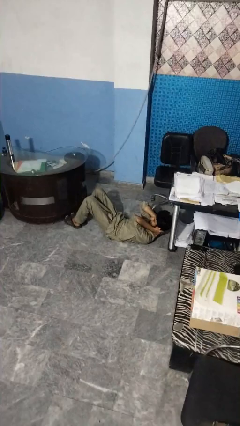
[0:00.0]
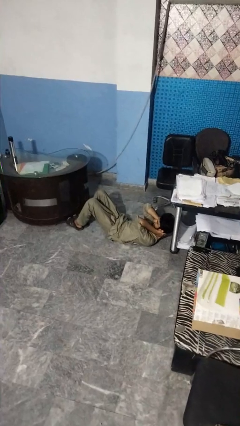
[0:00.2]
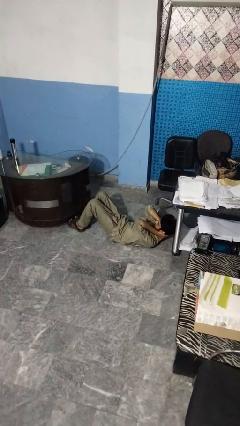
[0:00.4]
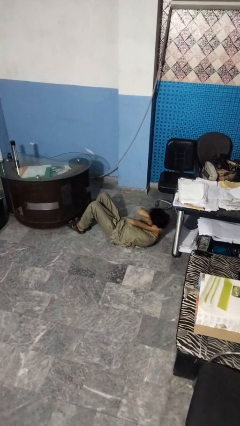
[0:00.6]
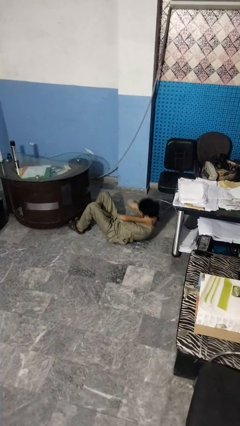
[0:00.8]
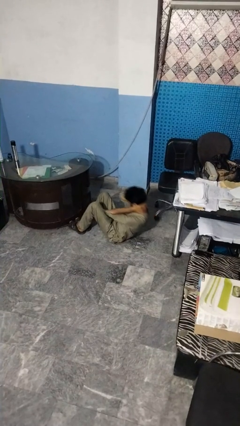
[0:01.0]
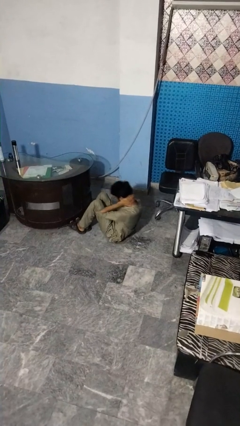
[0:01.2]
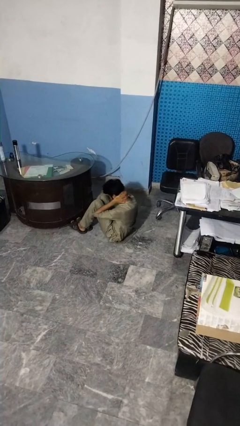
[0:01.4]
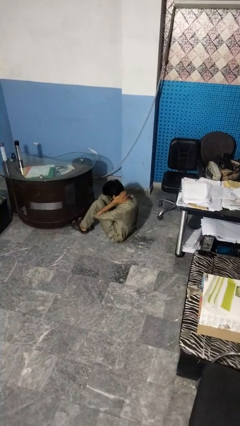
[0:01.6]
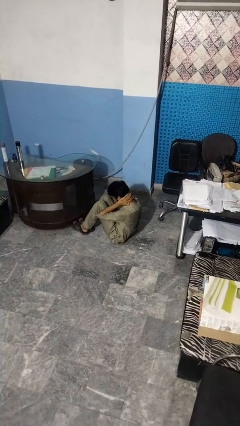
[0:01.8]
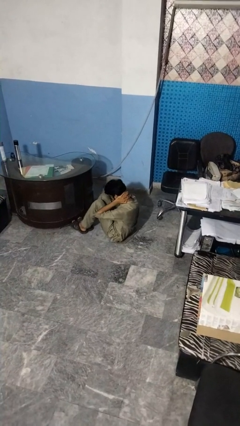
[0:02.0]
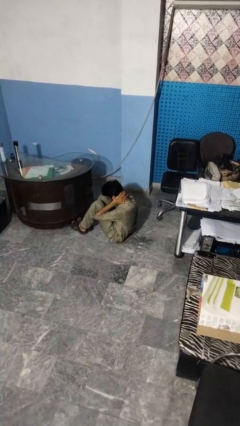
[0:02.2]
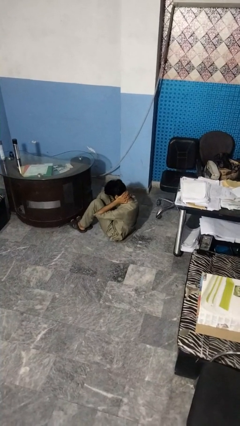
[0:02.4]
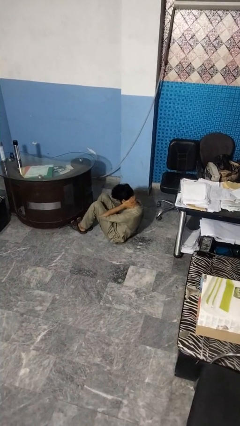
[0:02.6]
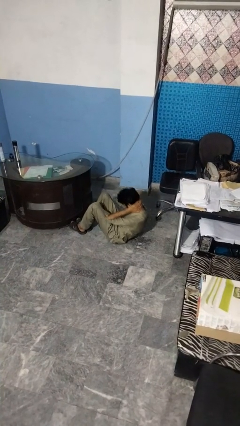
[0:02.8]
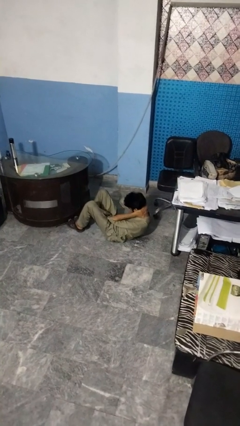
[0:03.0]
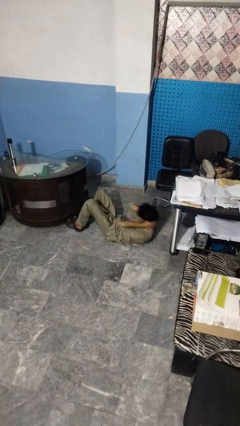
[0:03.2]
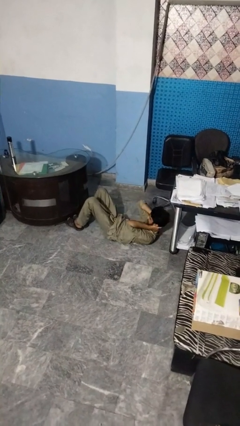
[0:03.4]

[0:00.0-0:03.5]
person exercises with situp

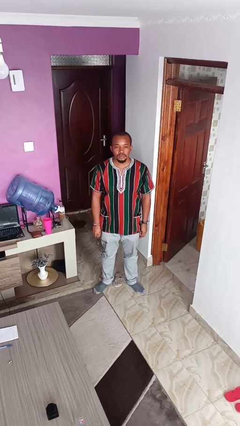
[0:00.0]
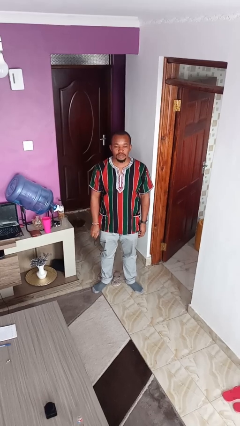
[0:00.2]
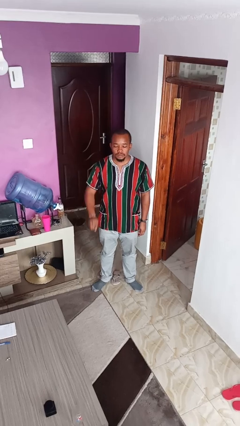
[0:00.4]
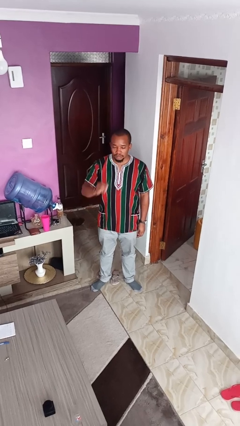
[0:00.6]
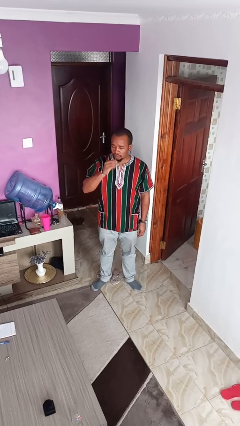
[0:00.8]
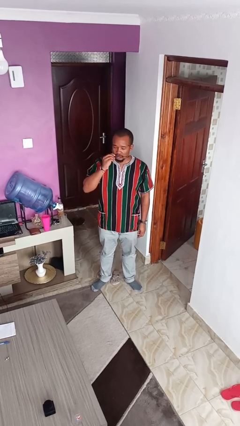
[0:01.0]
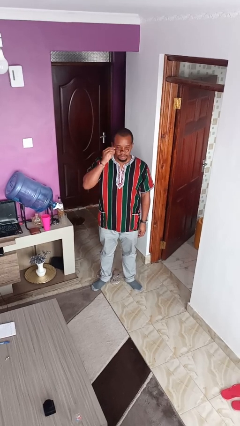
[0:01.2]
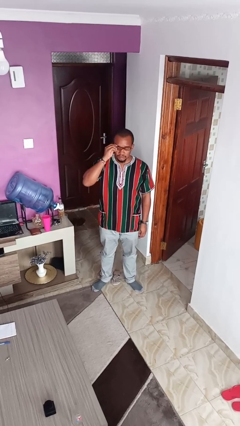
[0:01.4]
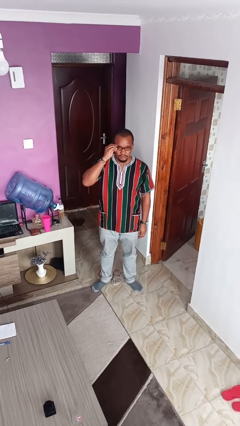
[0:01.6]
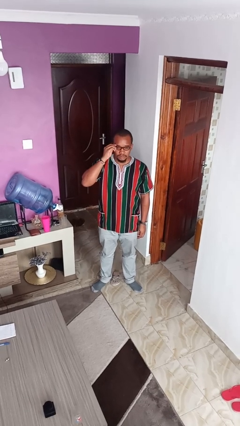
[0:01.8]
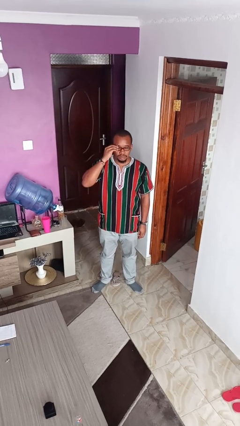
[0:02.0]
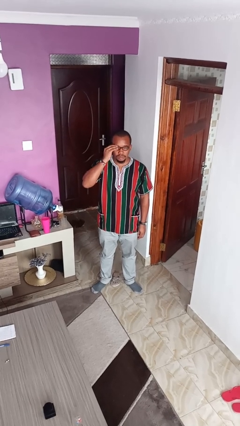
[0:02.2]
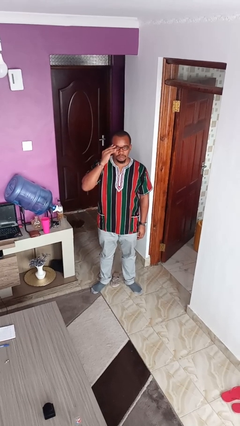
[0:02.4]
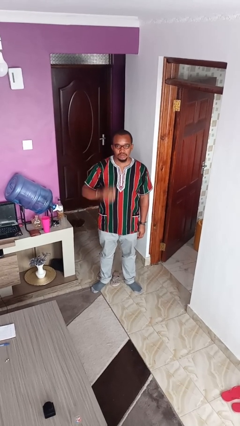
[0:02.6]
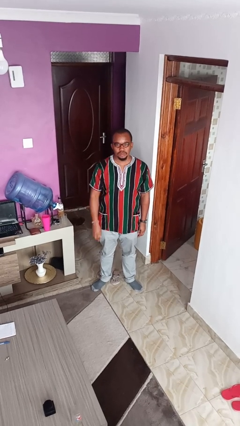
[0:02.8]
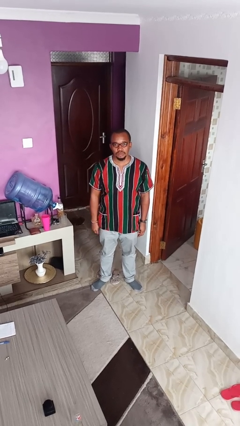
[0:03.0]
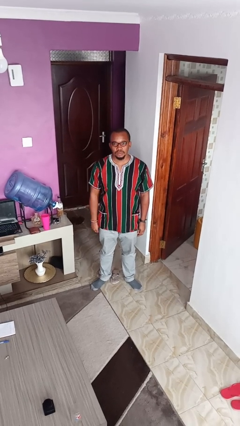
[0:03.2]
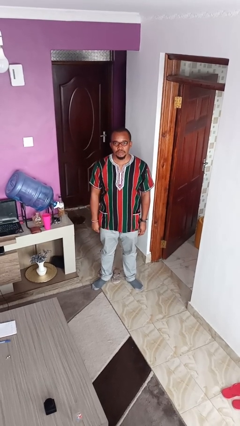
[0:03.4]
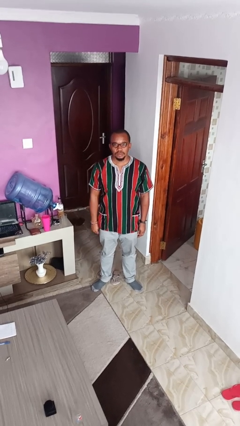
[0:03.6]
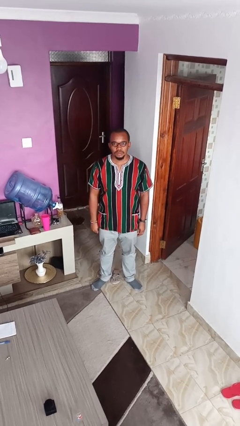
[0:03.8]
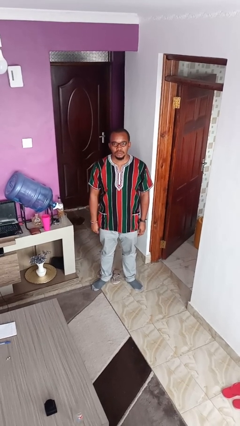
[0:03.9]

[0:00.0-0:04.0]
person puts on glasses

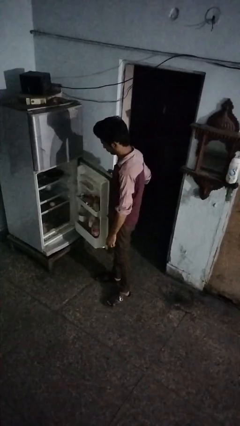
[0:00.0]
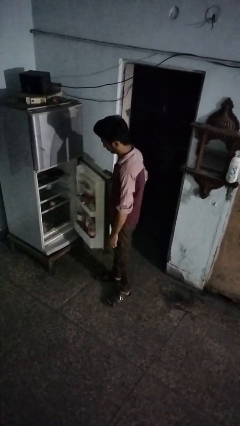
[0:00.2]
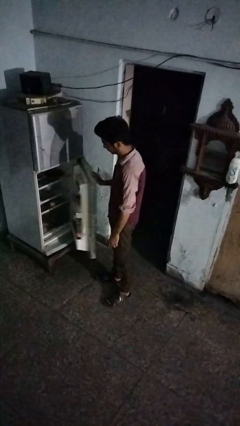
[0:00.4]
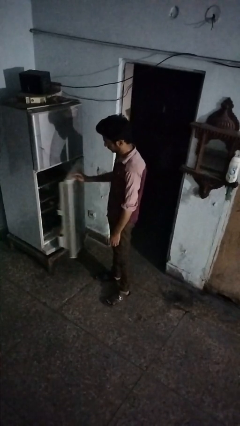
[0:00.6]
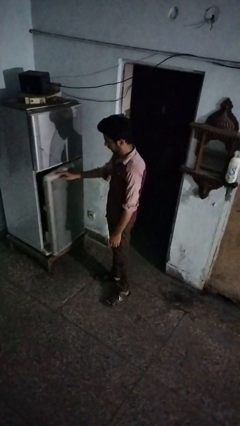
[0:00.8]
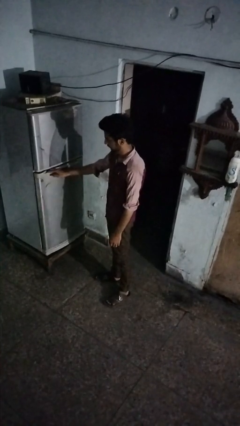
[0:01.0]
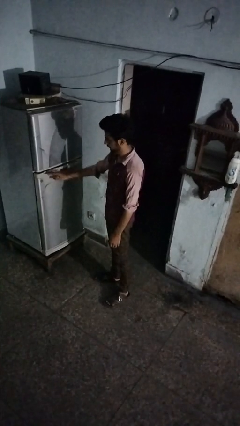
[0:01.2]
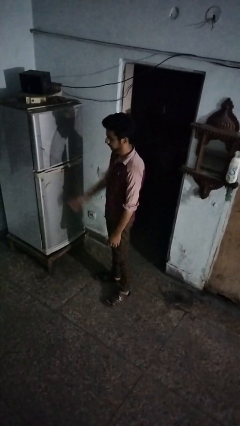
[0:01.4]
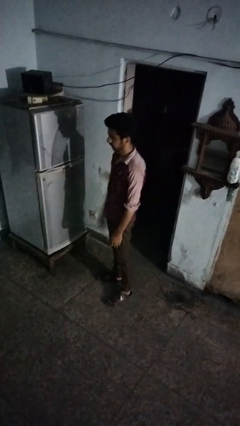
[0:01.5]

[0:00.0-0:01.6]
person closes refrigerator

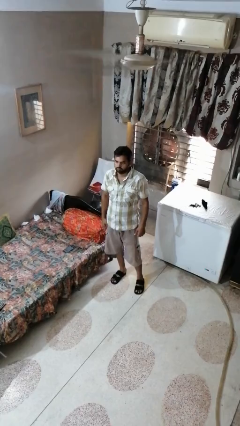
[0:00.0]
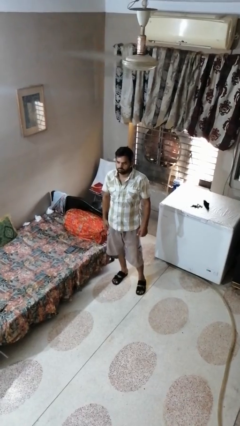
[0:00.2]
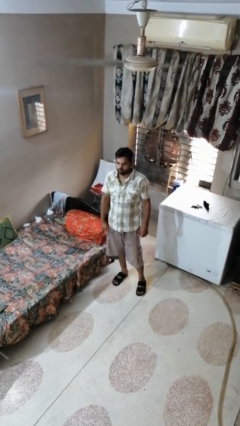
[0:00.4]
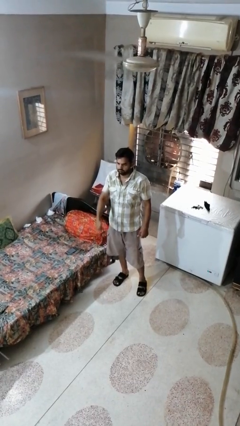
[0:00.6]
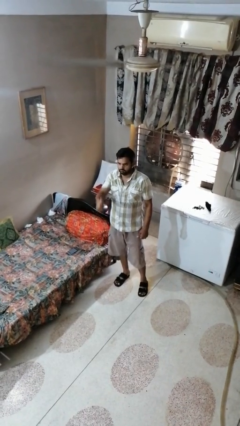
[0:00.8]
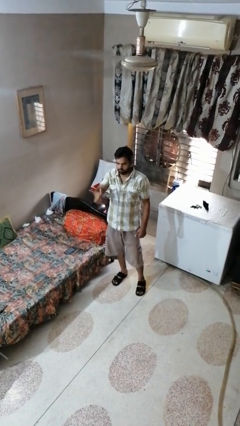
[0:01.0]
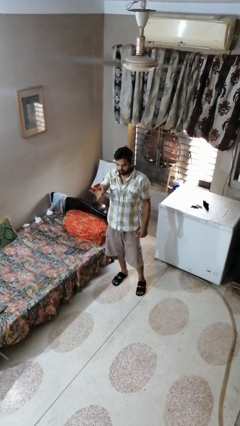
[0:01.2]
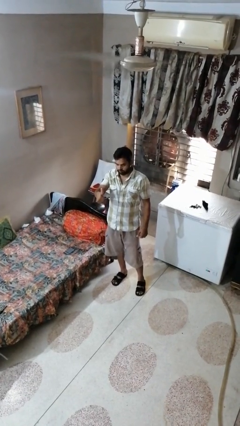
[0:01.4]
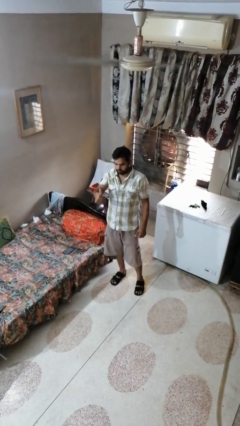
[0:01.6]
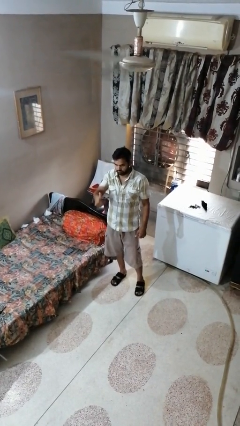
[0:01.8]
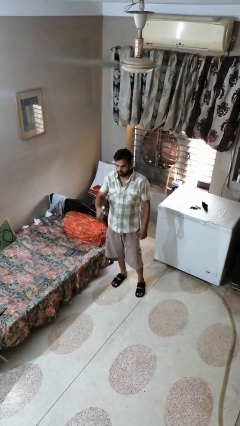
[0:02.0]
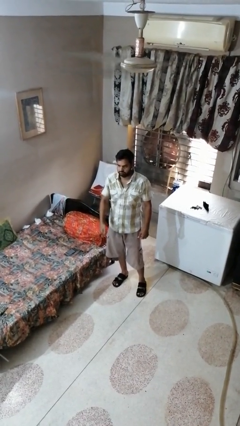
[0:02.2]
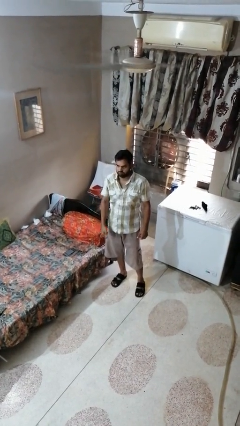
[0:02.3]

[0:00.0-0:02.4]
person gestures thumbs up

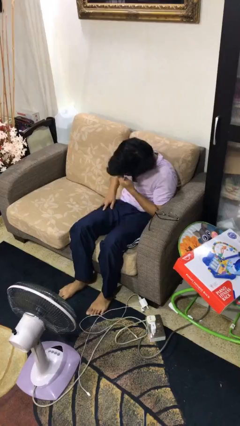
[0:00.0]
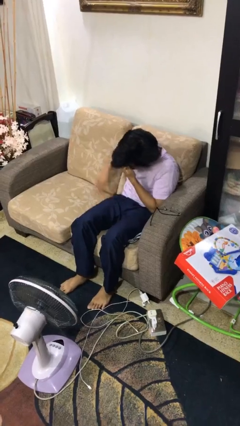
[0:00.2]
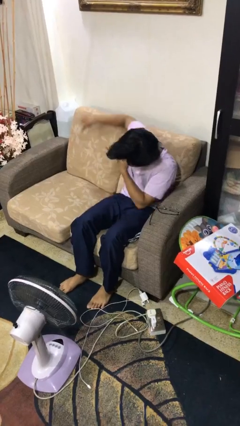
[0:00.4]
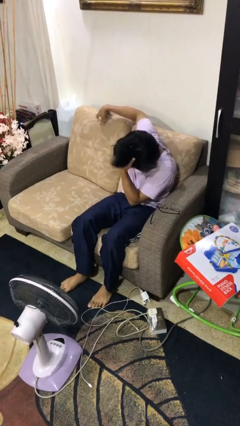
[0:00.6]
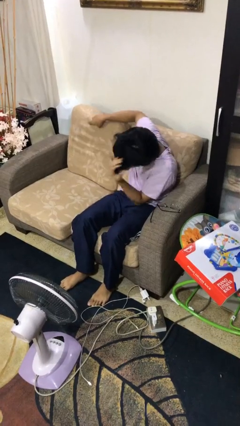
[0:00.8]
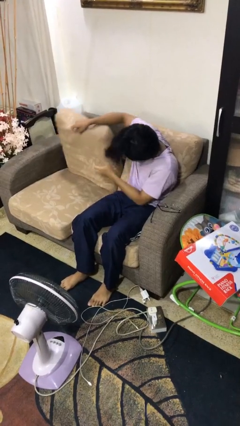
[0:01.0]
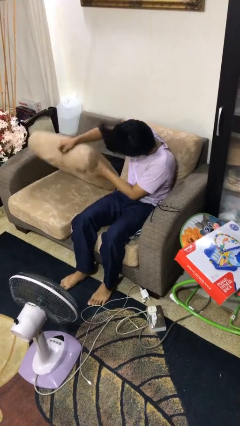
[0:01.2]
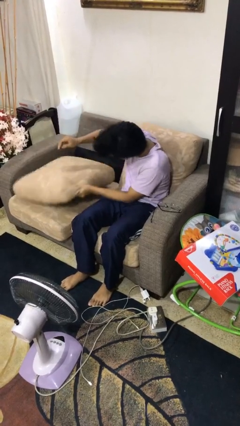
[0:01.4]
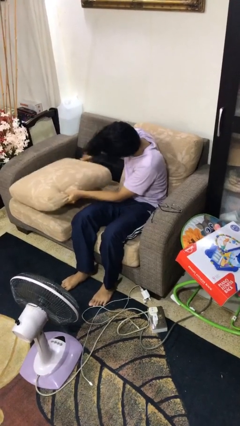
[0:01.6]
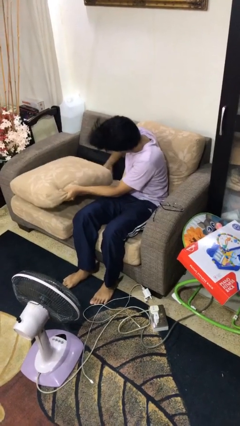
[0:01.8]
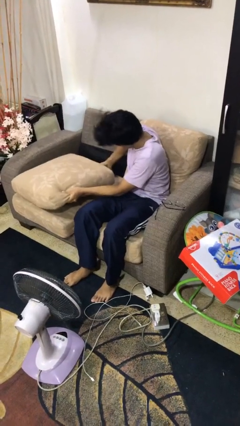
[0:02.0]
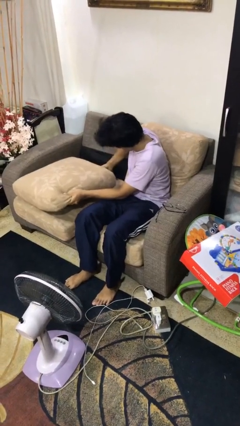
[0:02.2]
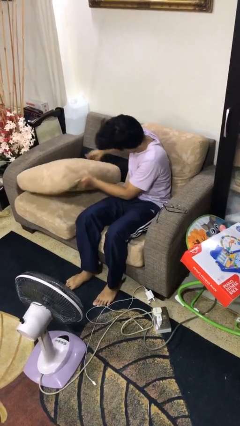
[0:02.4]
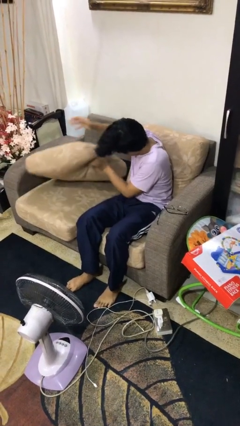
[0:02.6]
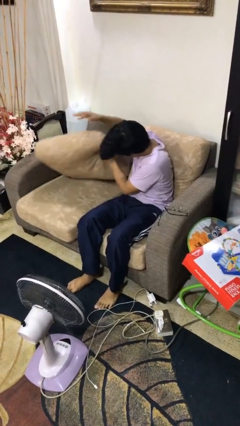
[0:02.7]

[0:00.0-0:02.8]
person searches in couch

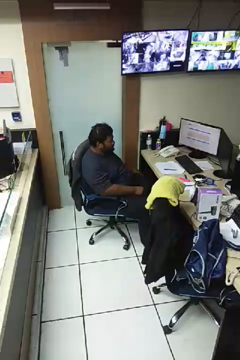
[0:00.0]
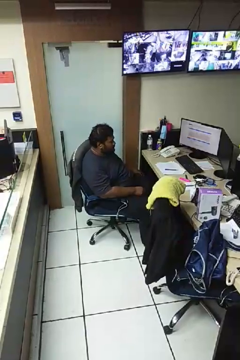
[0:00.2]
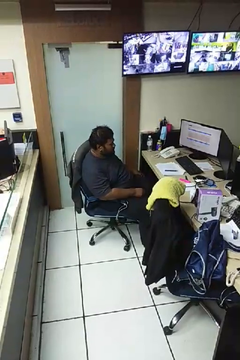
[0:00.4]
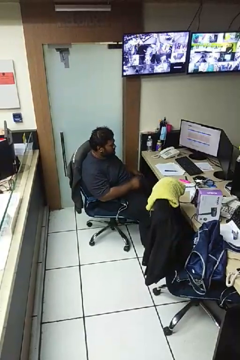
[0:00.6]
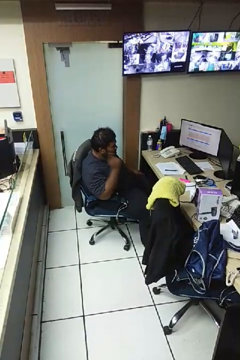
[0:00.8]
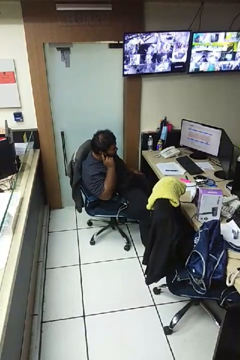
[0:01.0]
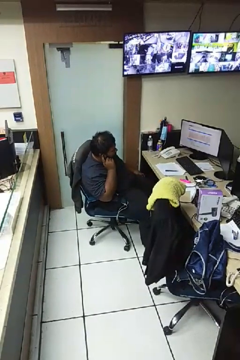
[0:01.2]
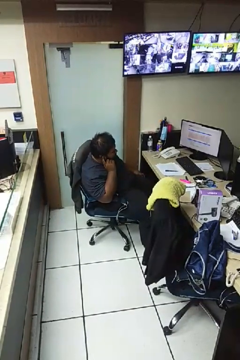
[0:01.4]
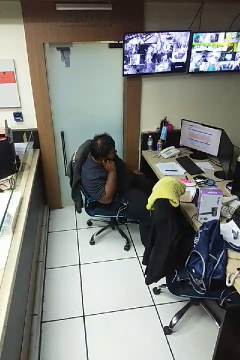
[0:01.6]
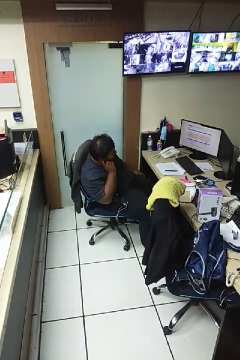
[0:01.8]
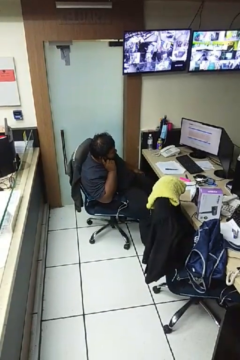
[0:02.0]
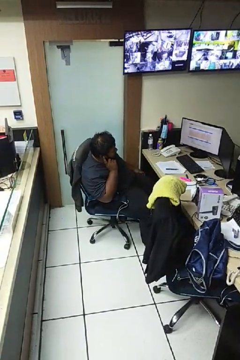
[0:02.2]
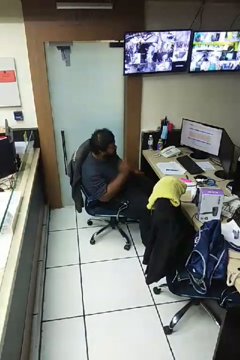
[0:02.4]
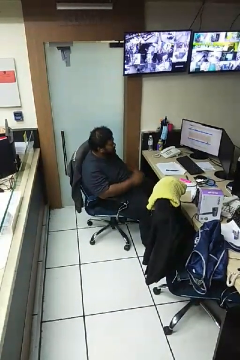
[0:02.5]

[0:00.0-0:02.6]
person gestures listen closely

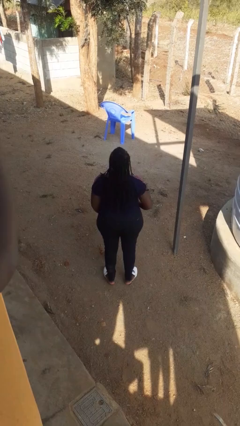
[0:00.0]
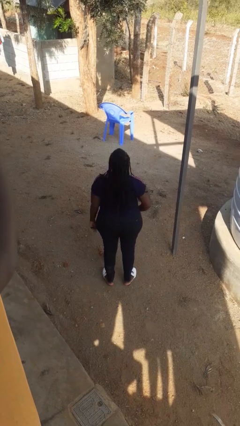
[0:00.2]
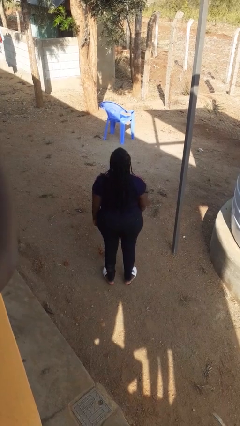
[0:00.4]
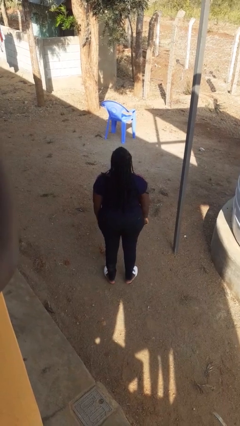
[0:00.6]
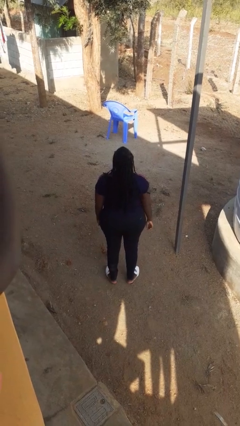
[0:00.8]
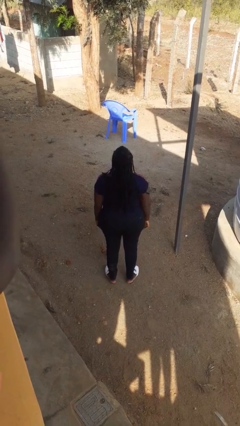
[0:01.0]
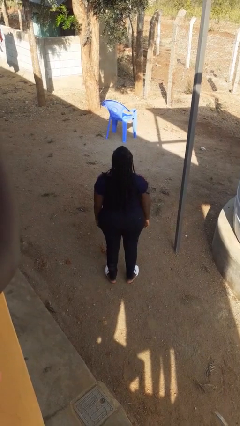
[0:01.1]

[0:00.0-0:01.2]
person takes off hairtie
